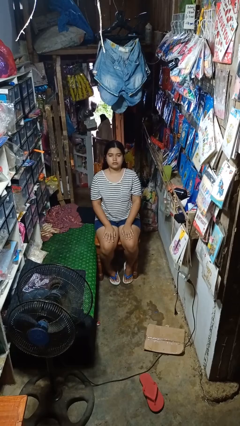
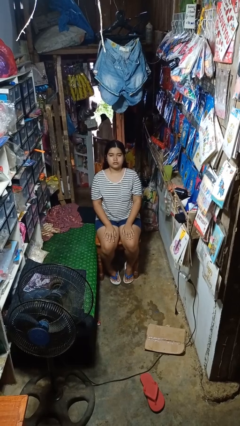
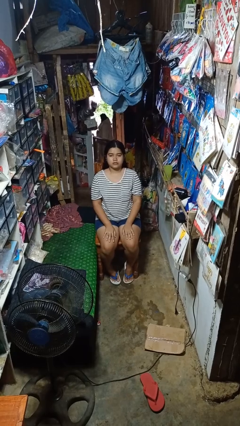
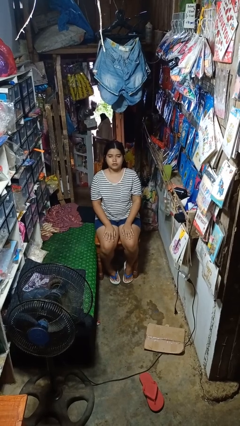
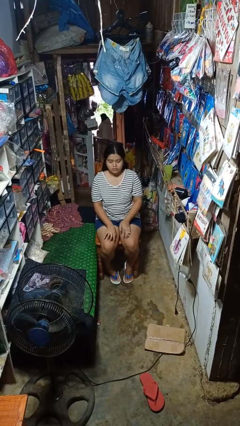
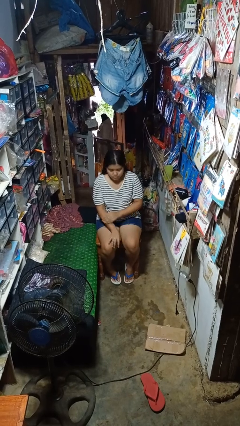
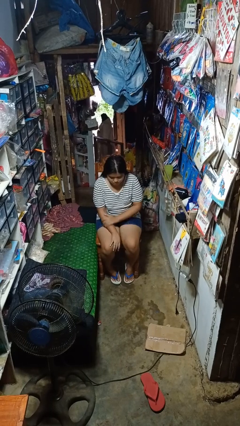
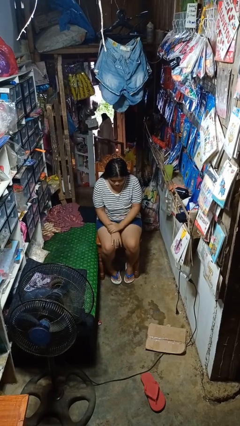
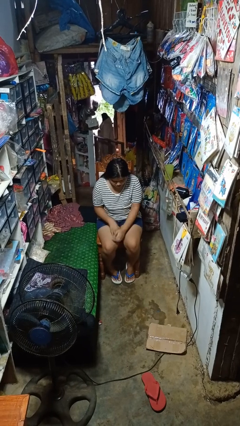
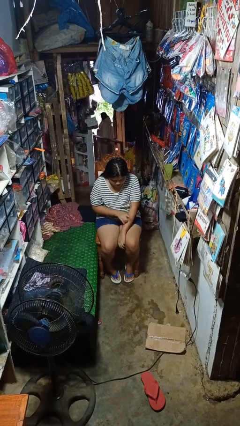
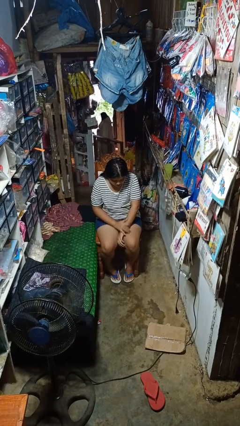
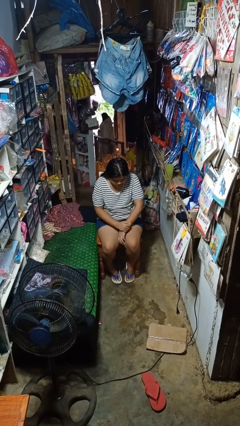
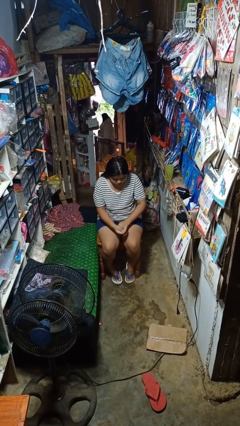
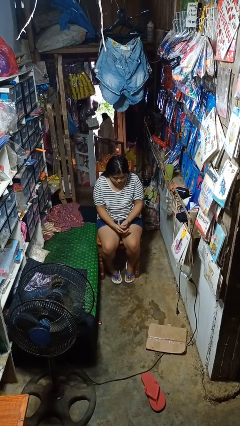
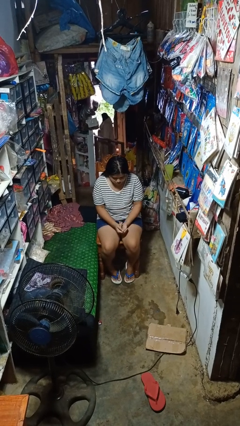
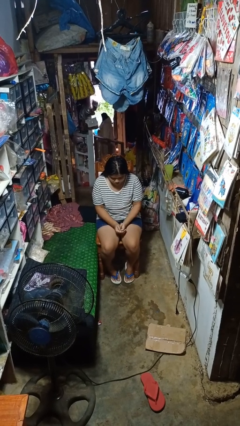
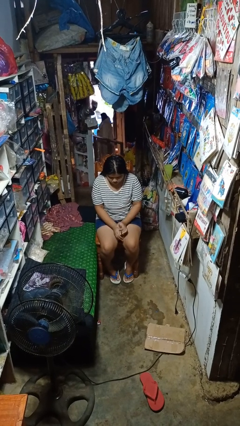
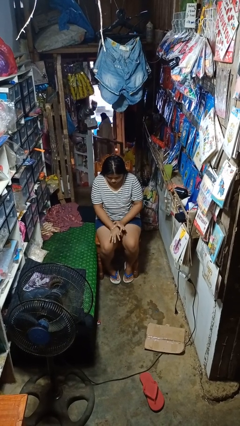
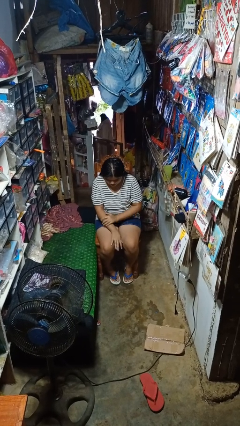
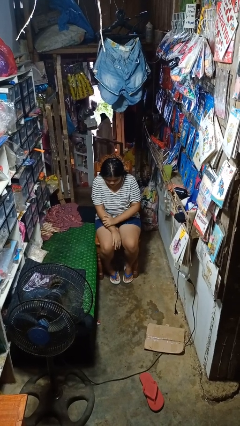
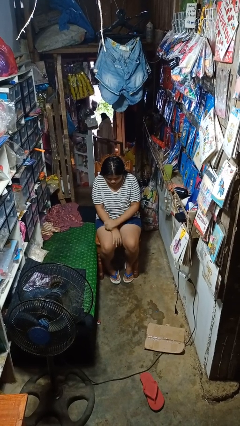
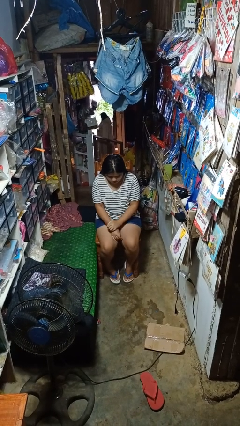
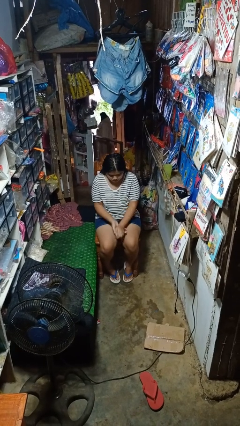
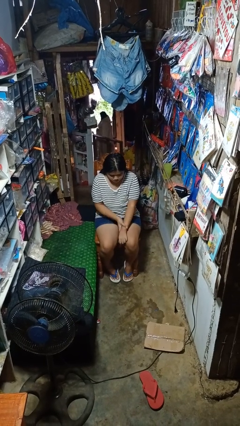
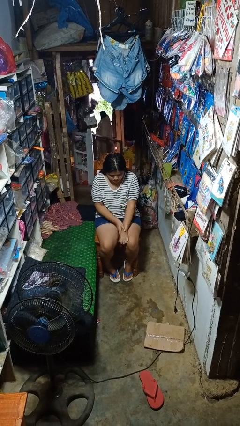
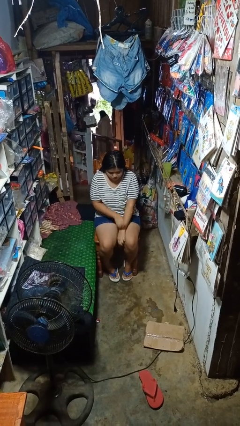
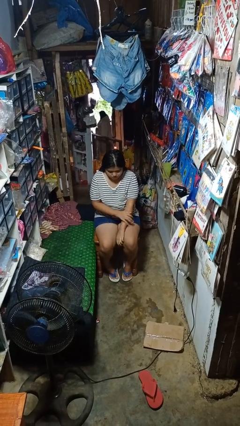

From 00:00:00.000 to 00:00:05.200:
person looks at hands in lap

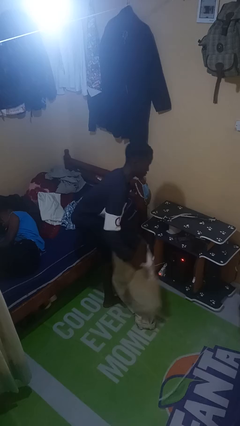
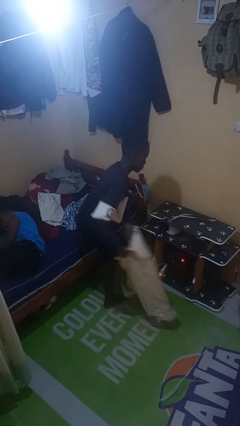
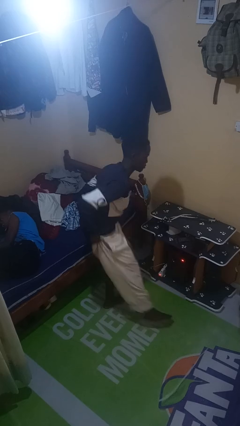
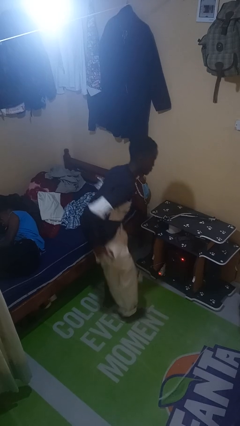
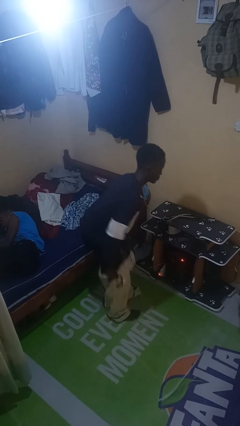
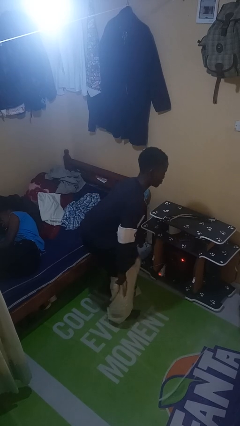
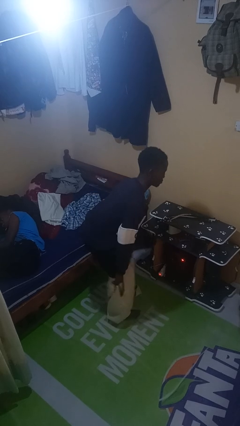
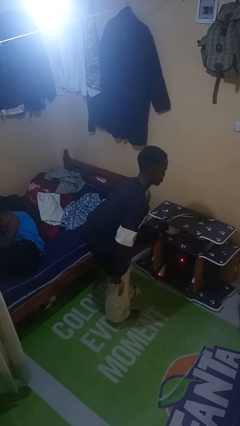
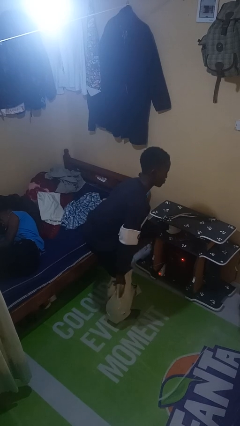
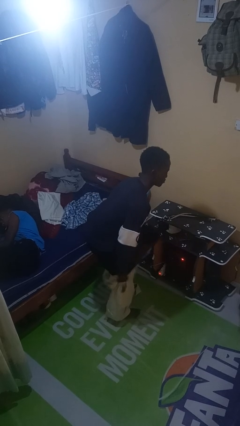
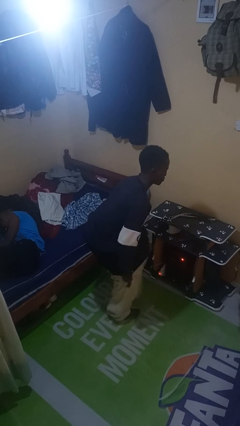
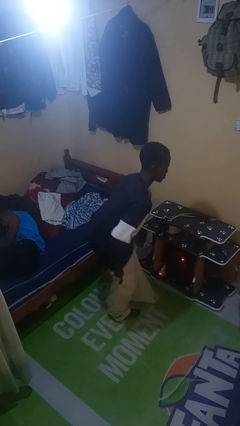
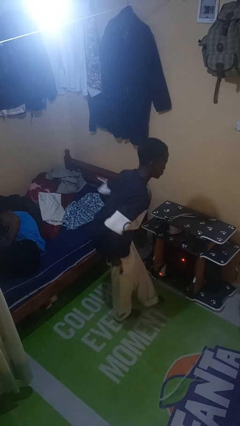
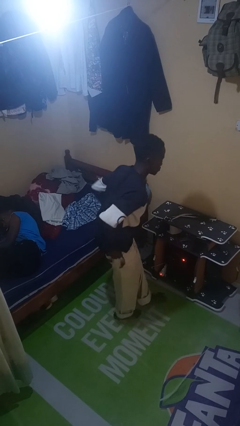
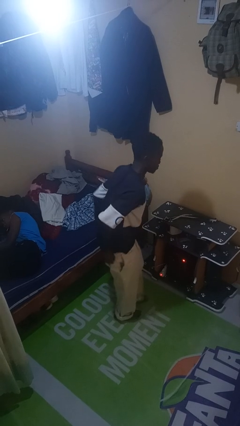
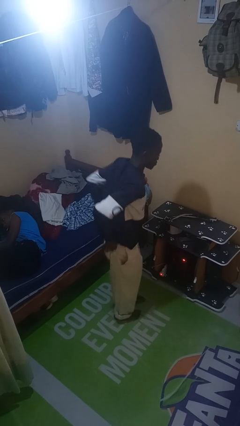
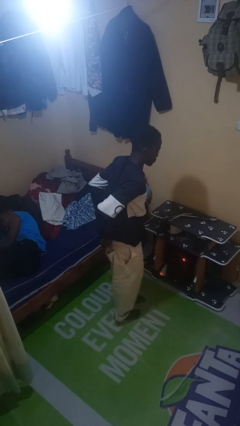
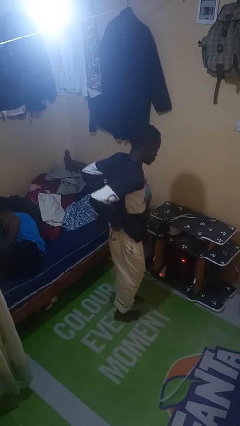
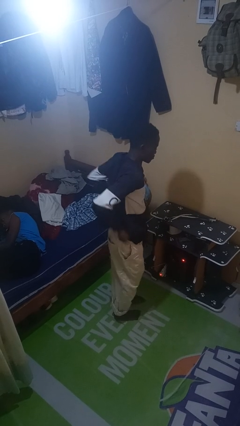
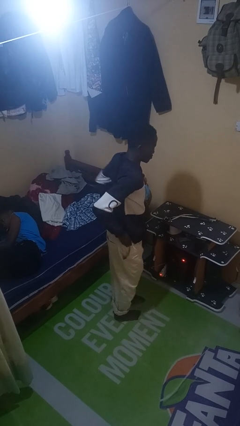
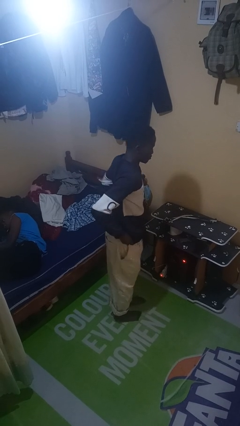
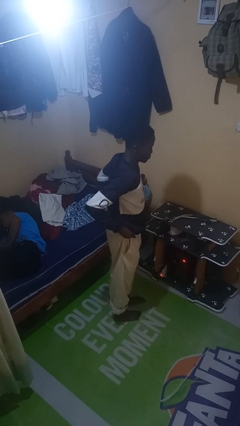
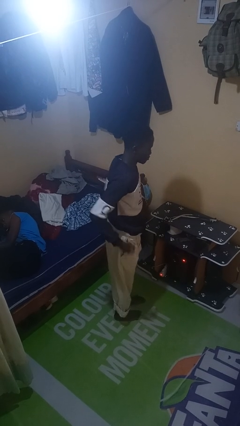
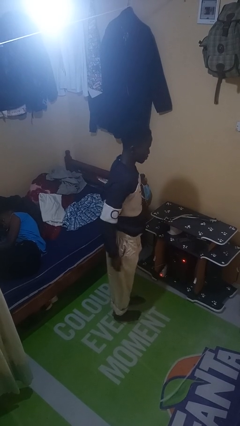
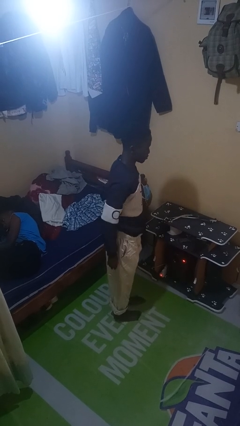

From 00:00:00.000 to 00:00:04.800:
person puts on pants

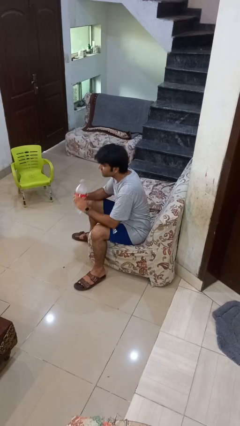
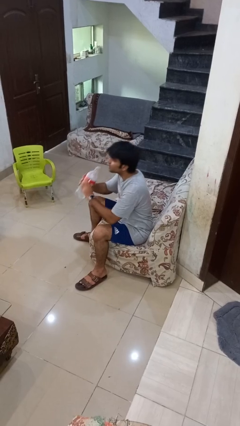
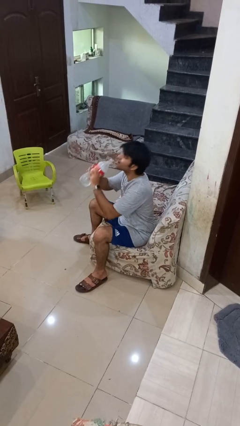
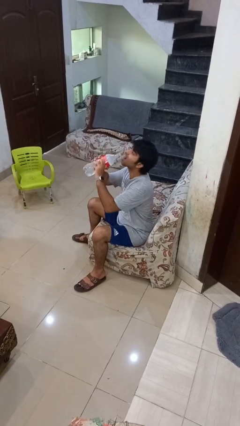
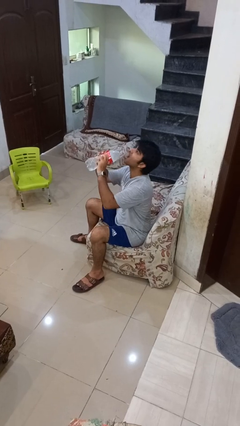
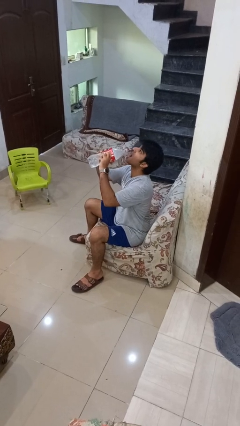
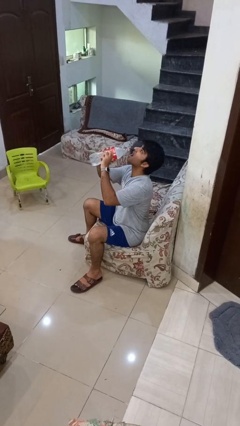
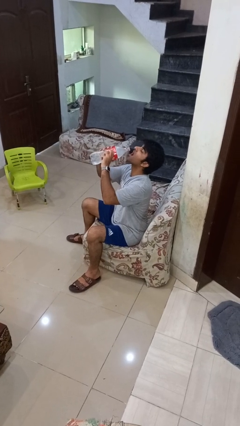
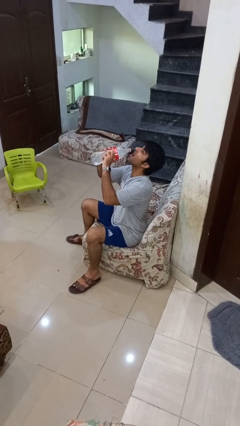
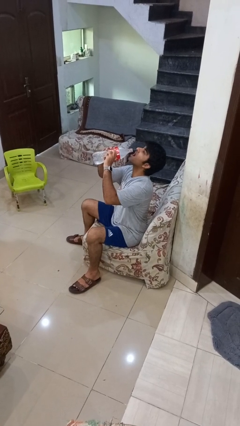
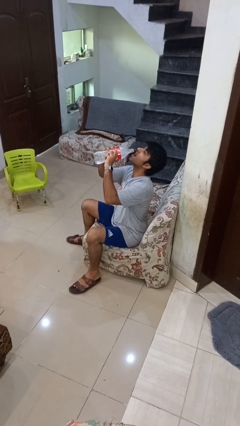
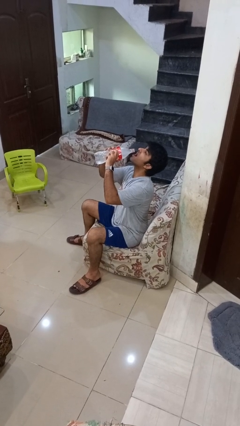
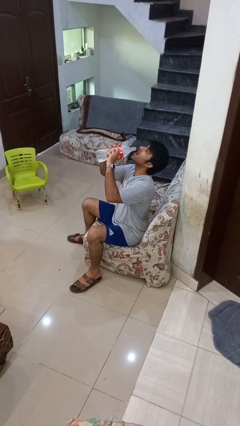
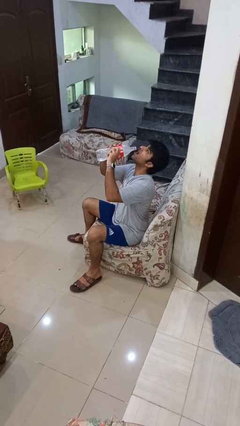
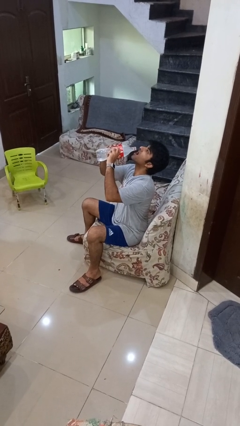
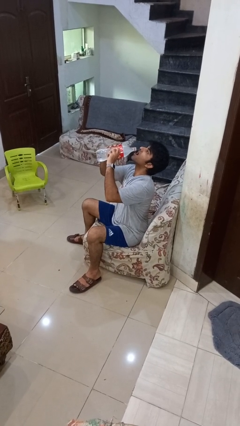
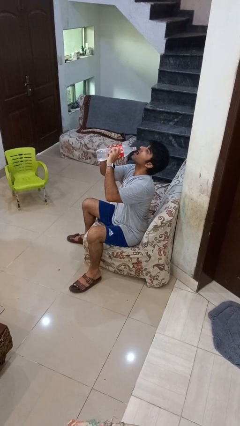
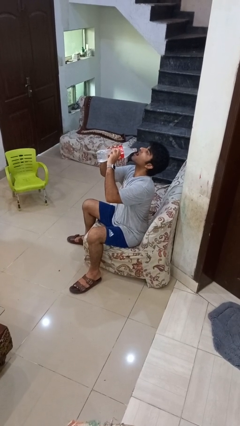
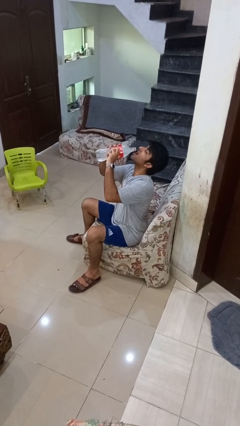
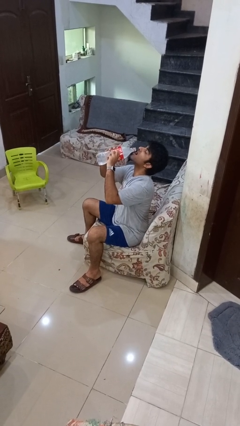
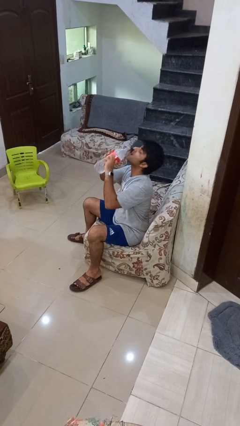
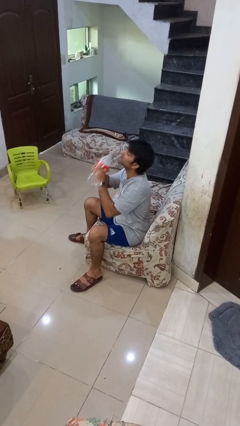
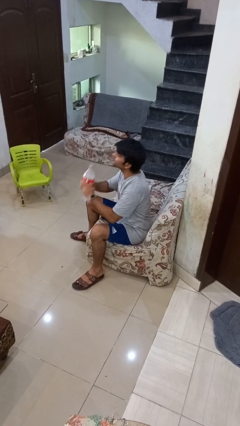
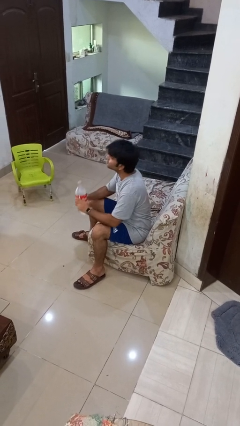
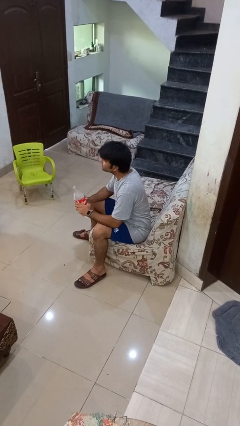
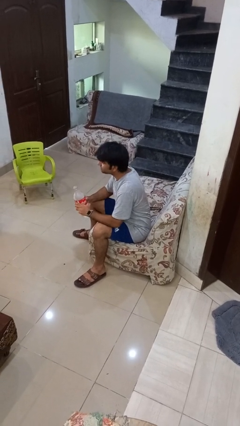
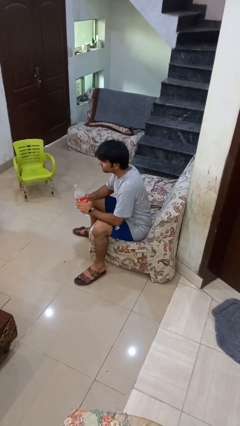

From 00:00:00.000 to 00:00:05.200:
person drinks from bottle

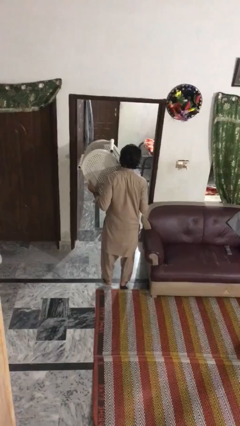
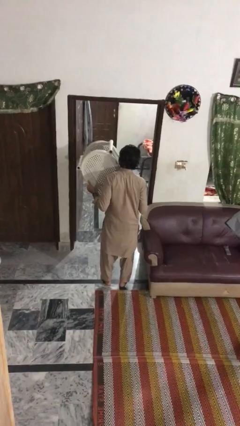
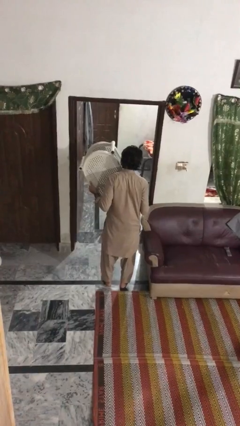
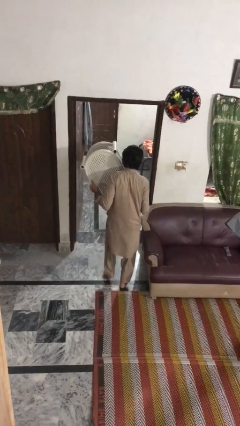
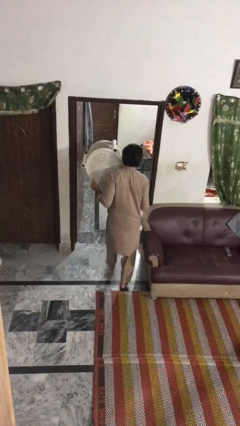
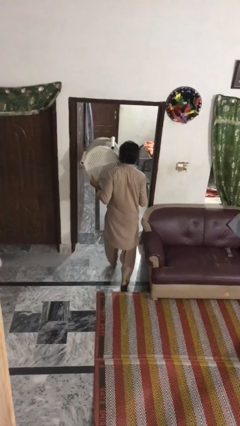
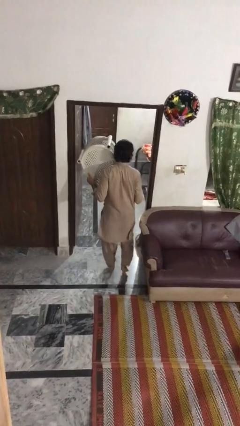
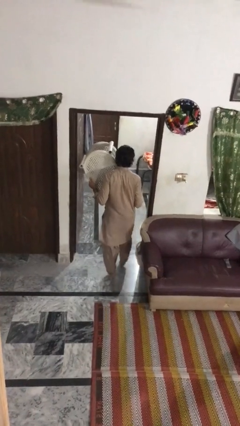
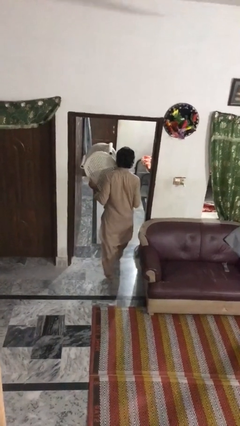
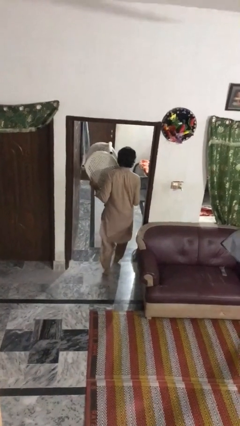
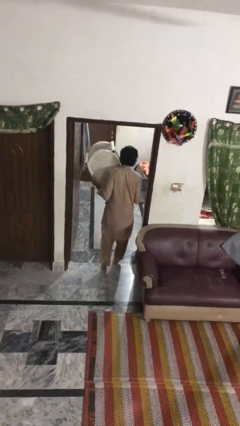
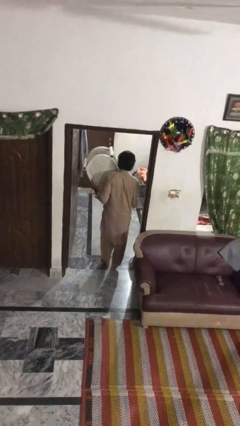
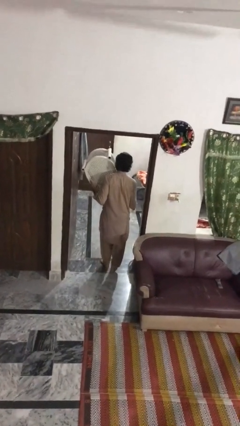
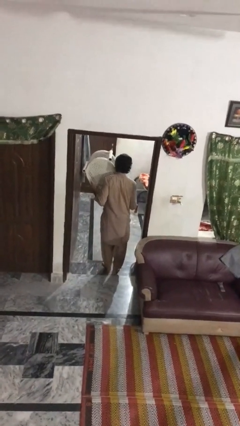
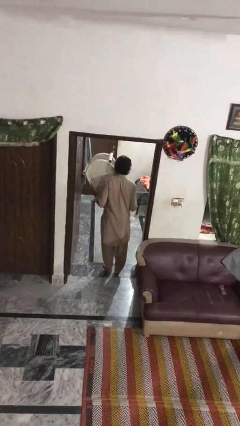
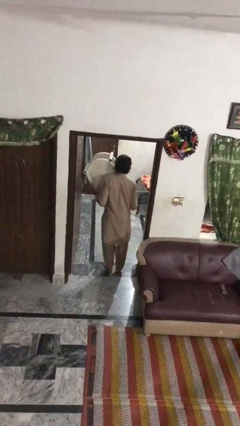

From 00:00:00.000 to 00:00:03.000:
person carries furniture
